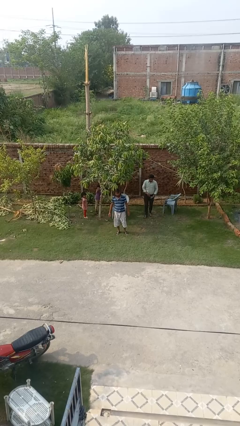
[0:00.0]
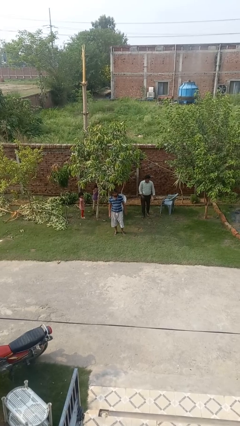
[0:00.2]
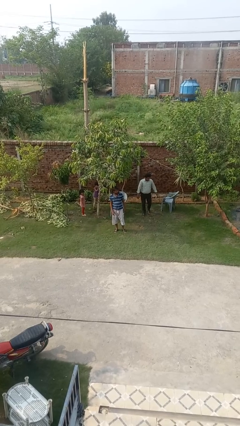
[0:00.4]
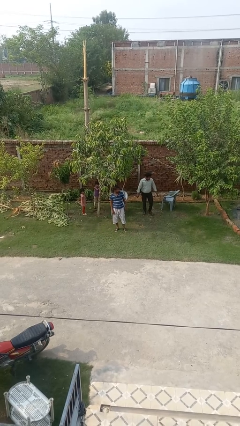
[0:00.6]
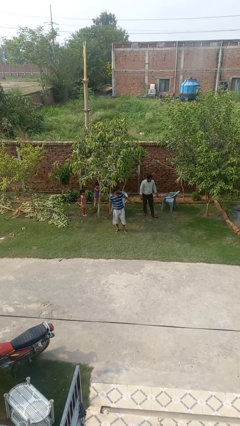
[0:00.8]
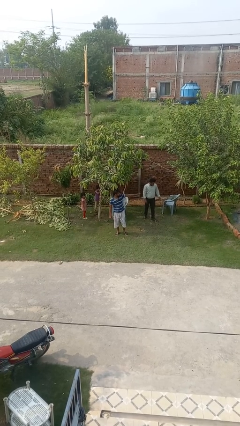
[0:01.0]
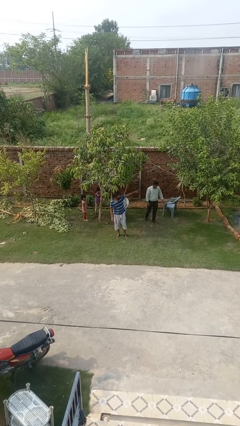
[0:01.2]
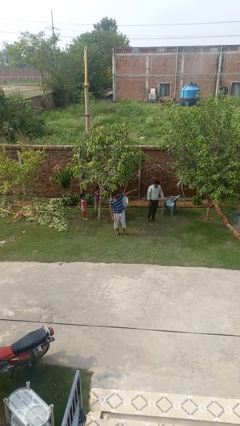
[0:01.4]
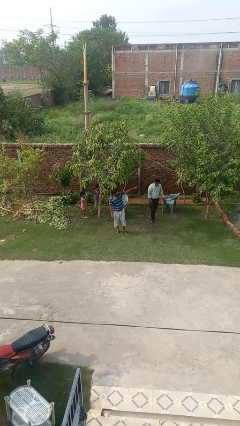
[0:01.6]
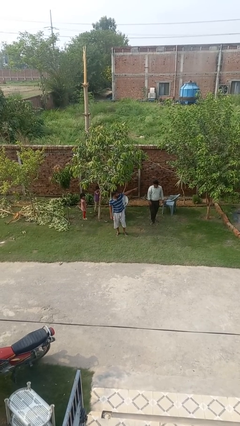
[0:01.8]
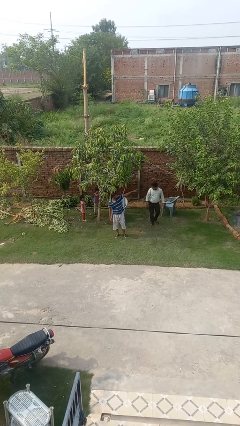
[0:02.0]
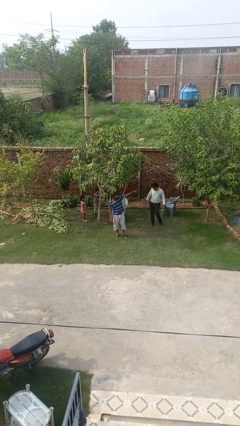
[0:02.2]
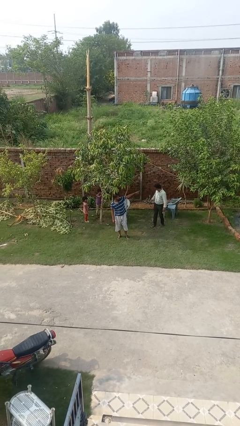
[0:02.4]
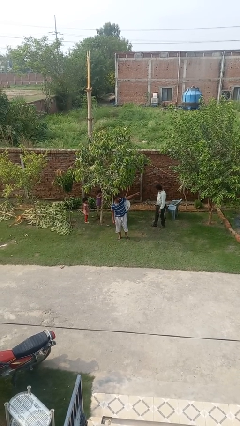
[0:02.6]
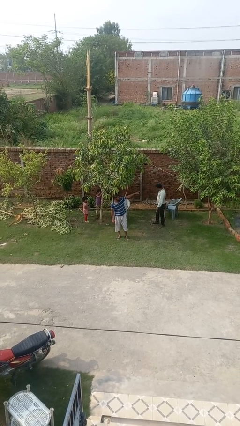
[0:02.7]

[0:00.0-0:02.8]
person points at person

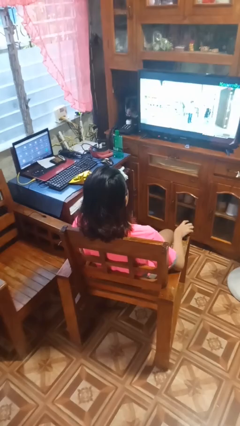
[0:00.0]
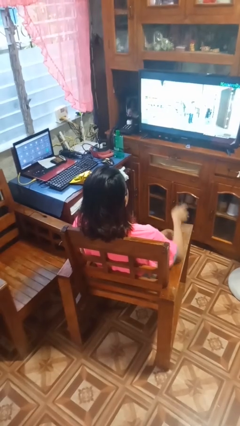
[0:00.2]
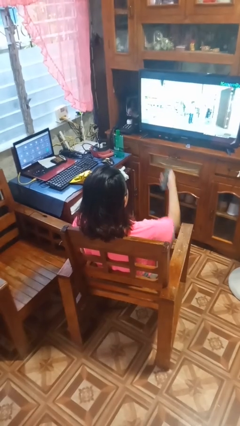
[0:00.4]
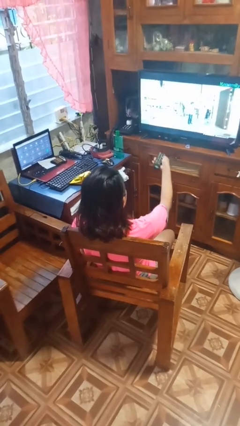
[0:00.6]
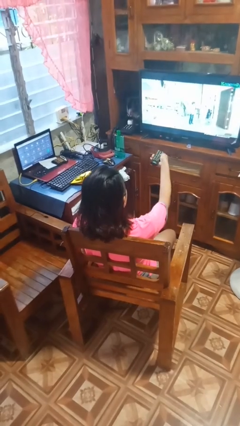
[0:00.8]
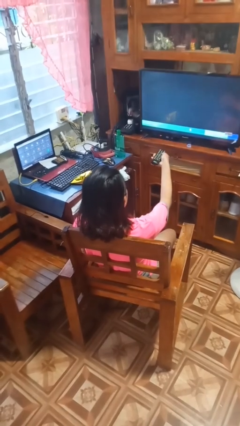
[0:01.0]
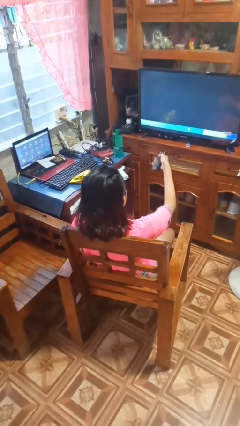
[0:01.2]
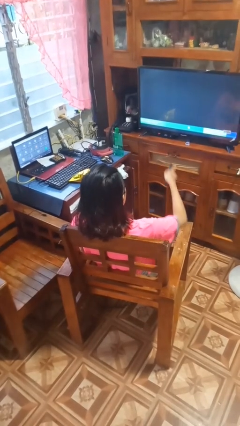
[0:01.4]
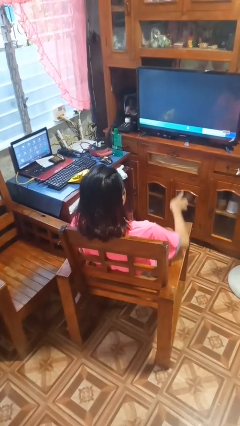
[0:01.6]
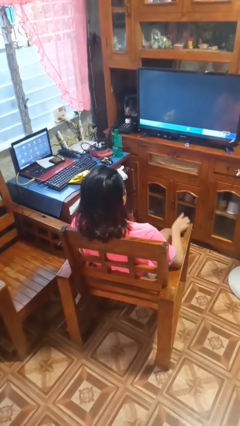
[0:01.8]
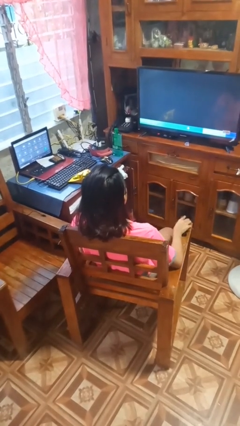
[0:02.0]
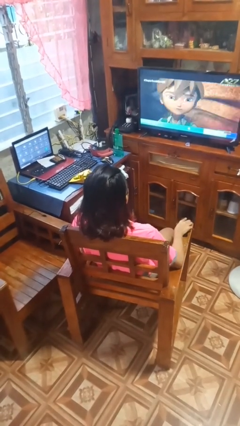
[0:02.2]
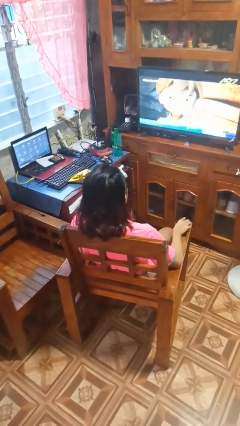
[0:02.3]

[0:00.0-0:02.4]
person uses television remote

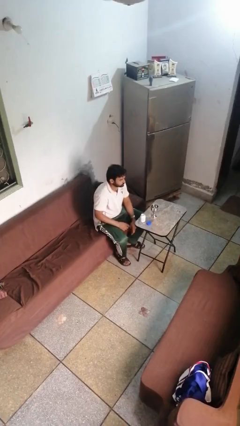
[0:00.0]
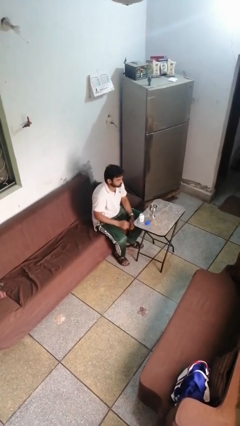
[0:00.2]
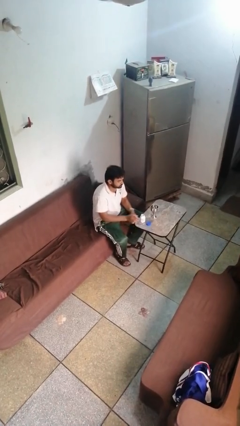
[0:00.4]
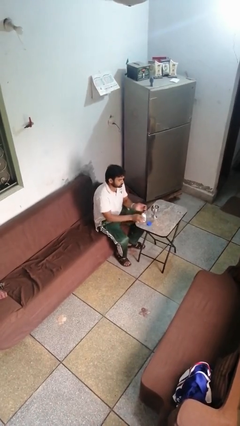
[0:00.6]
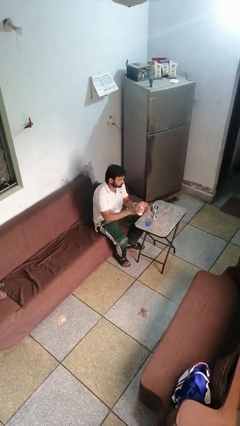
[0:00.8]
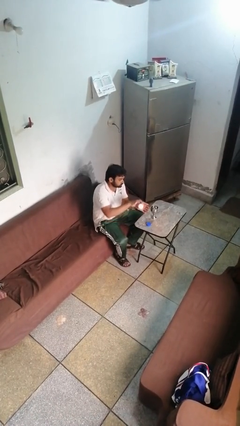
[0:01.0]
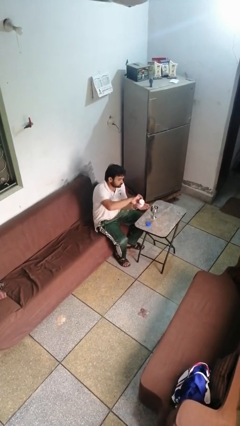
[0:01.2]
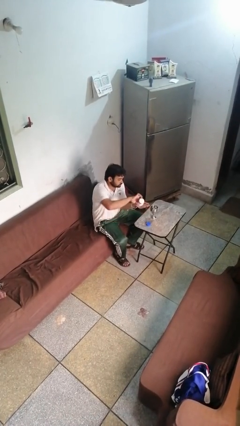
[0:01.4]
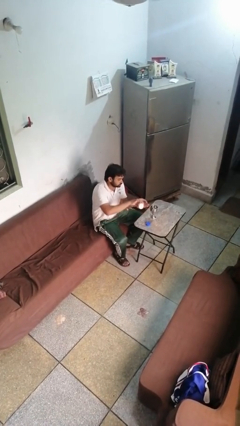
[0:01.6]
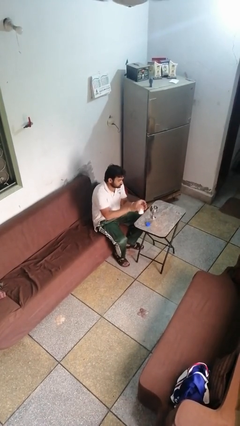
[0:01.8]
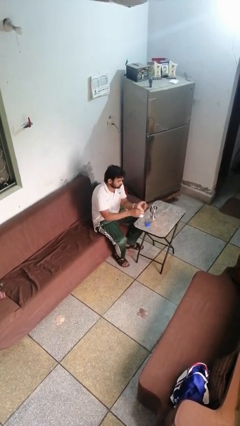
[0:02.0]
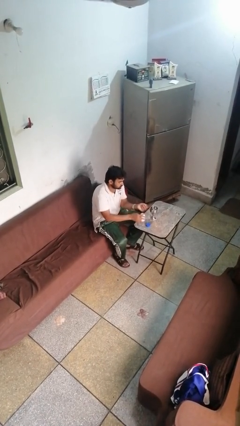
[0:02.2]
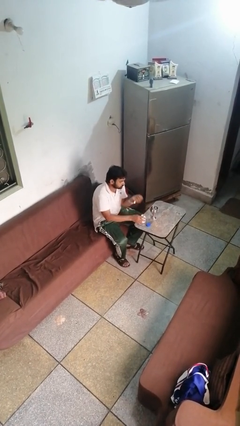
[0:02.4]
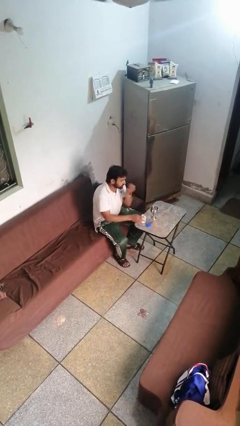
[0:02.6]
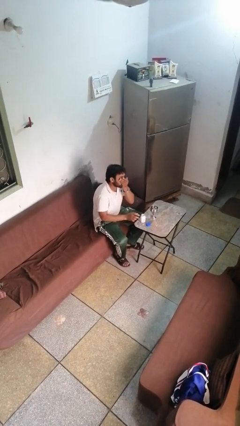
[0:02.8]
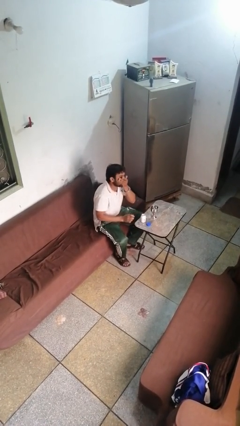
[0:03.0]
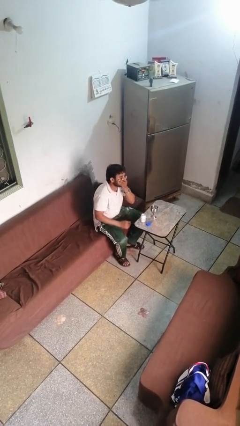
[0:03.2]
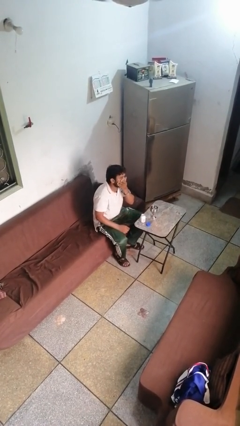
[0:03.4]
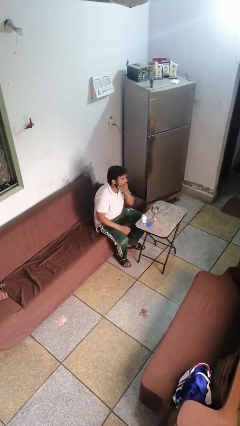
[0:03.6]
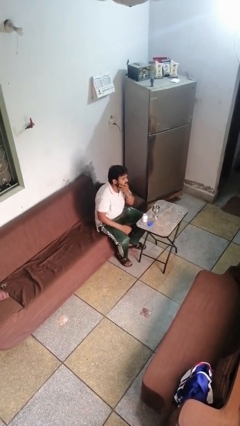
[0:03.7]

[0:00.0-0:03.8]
person takes medicine pills

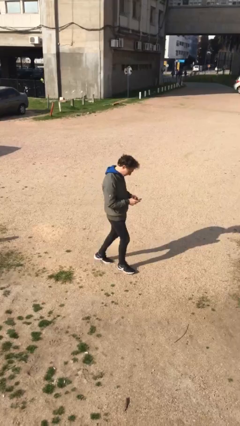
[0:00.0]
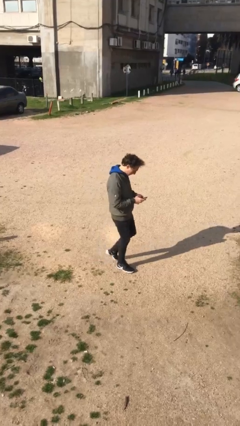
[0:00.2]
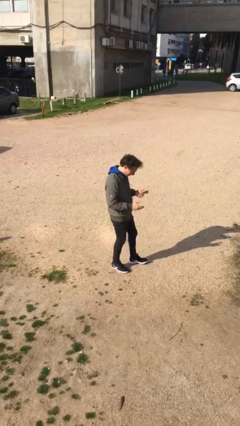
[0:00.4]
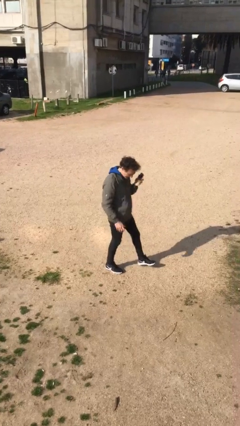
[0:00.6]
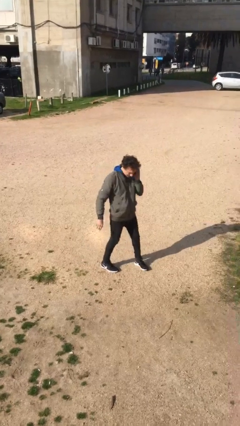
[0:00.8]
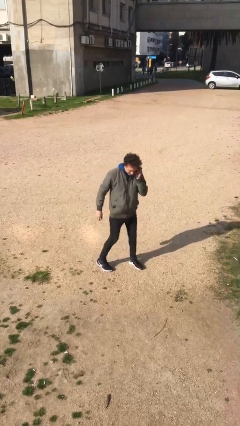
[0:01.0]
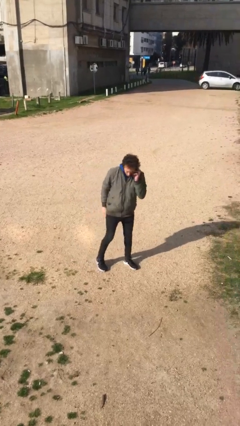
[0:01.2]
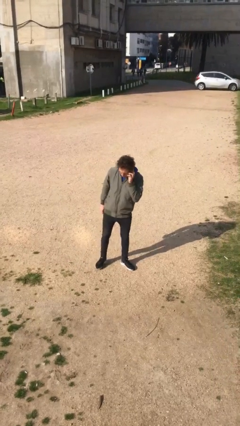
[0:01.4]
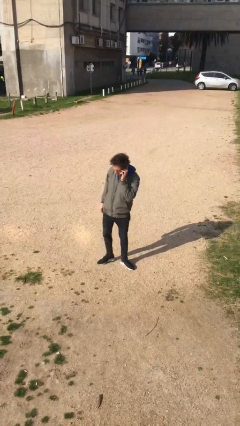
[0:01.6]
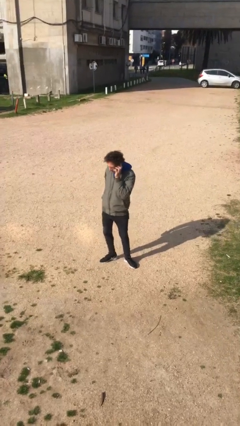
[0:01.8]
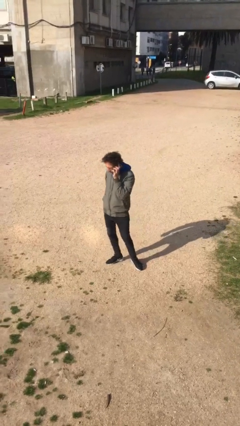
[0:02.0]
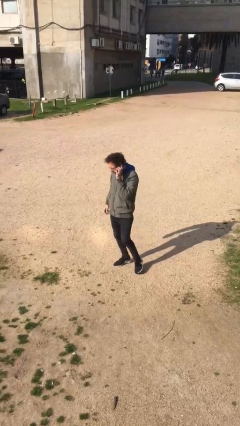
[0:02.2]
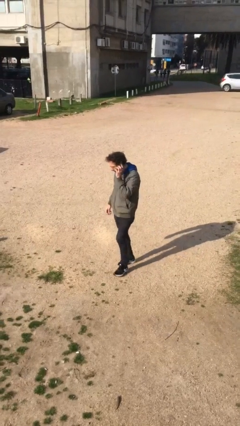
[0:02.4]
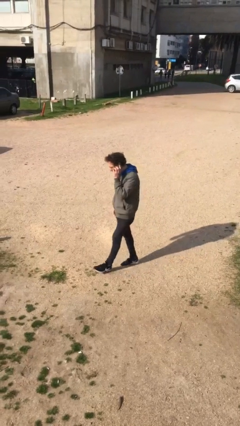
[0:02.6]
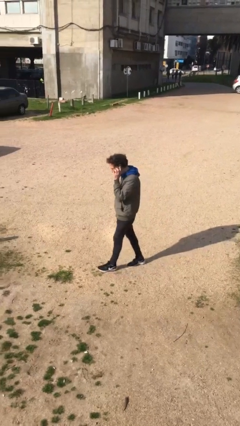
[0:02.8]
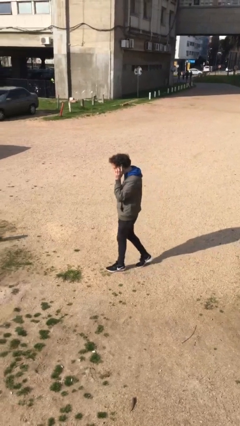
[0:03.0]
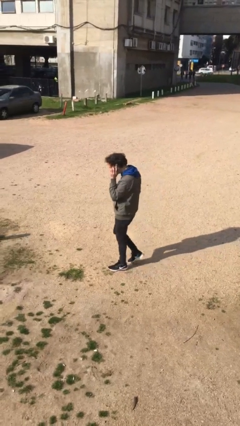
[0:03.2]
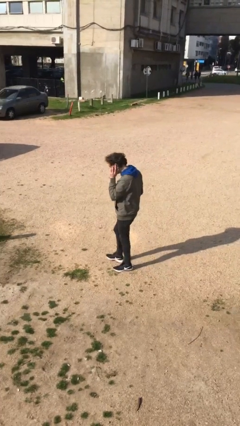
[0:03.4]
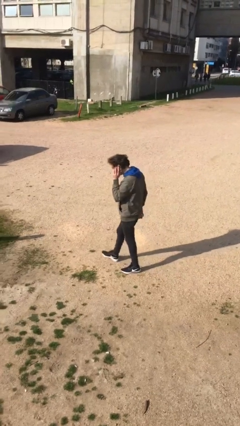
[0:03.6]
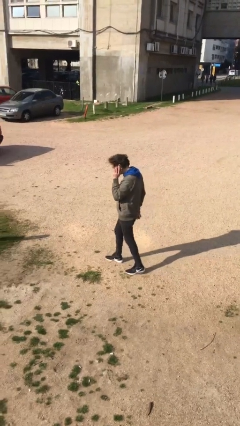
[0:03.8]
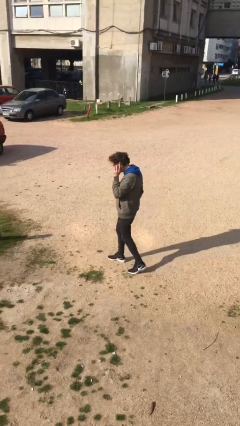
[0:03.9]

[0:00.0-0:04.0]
person talks on phone

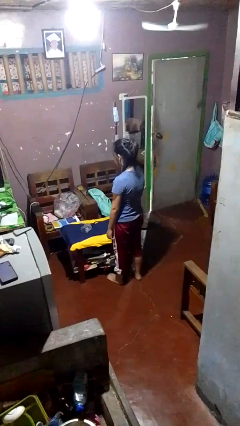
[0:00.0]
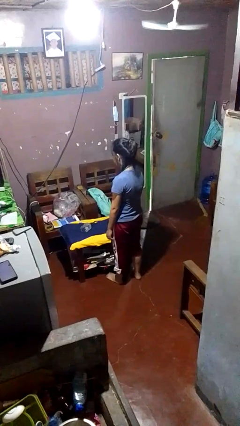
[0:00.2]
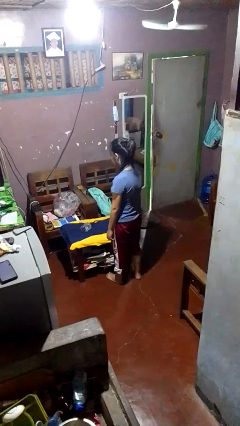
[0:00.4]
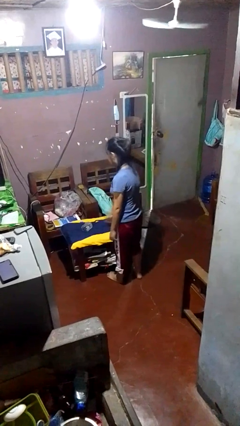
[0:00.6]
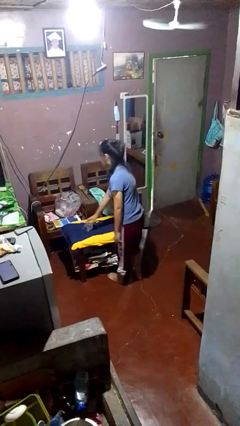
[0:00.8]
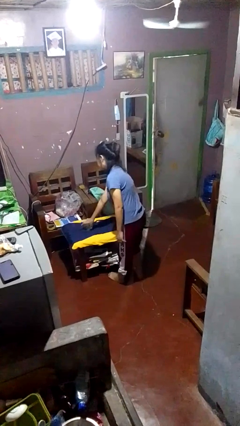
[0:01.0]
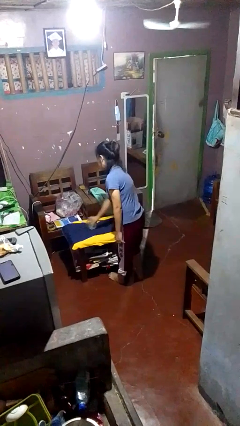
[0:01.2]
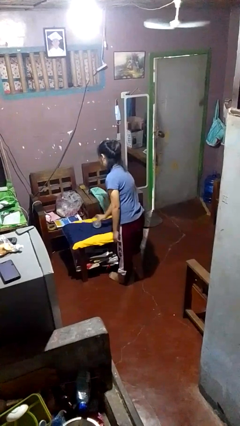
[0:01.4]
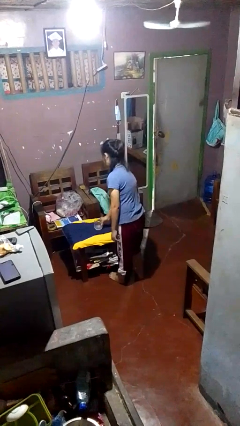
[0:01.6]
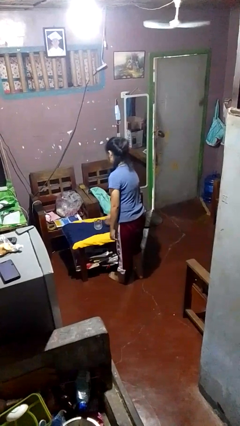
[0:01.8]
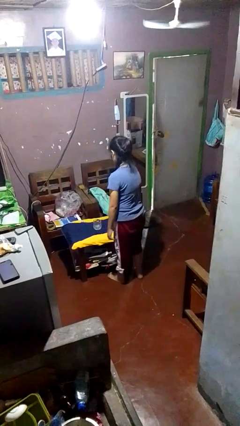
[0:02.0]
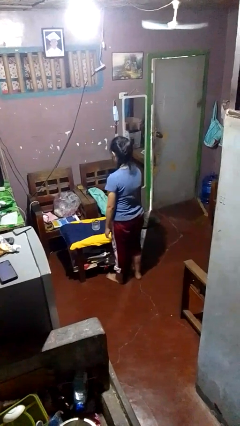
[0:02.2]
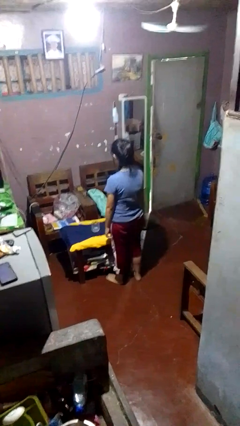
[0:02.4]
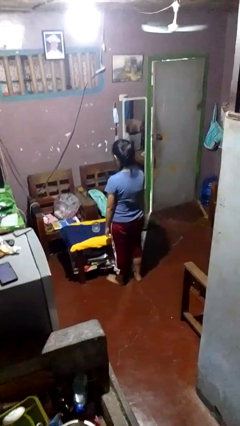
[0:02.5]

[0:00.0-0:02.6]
person sets upright glass

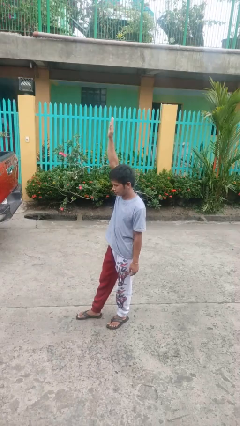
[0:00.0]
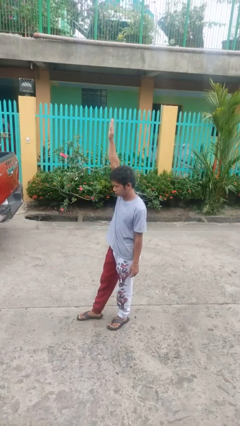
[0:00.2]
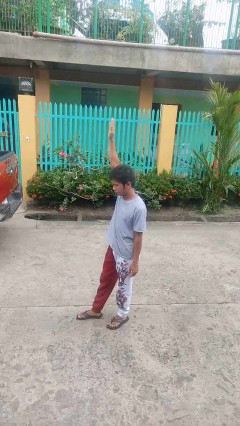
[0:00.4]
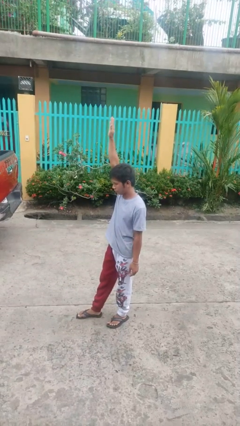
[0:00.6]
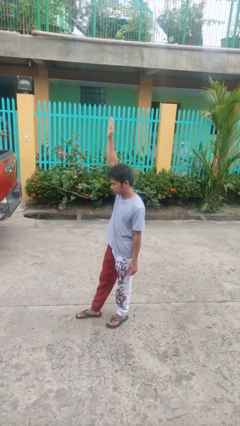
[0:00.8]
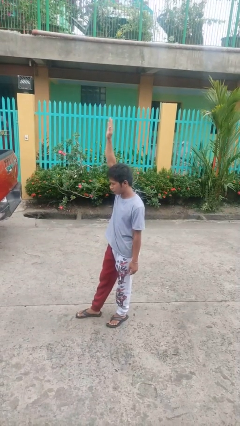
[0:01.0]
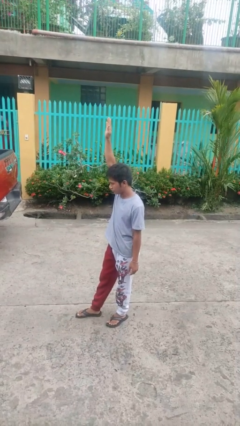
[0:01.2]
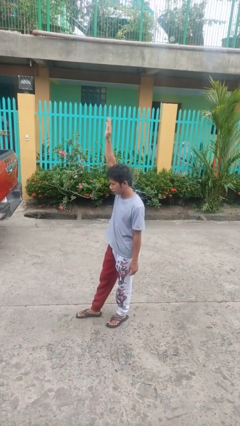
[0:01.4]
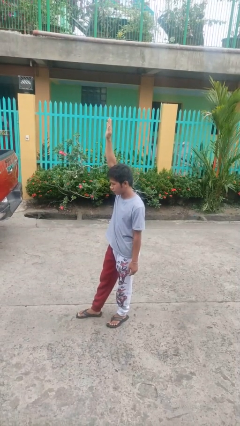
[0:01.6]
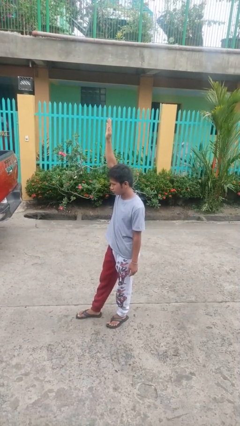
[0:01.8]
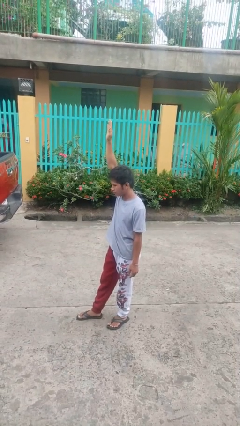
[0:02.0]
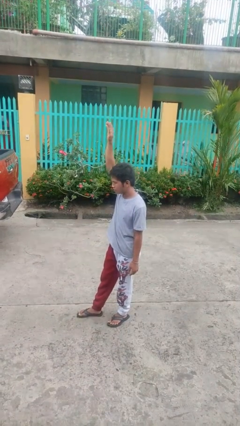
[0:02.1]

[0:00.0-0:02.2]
person gestures raise hand
